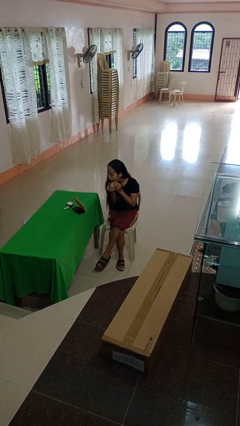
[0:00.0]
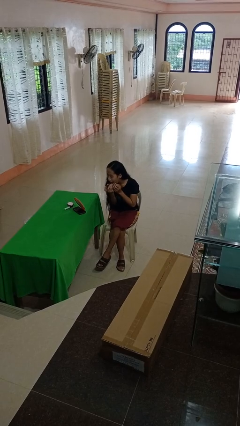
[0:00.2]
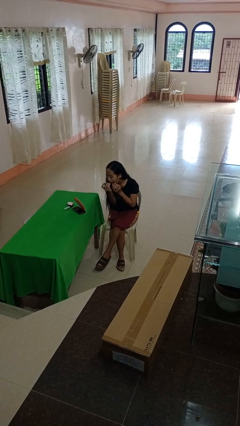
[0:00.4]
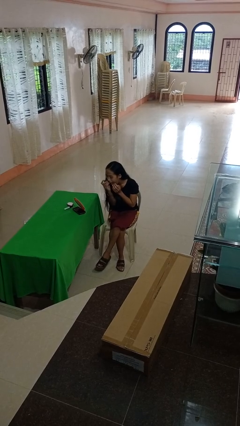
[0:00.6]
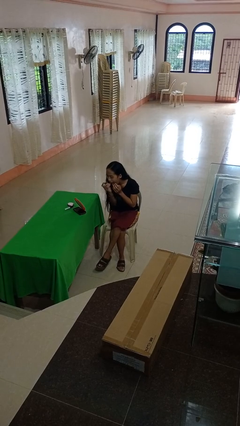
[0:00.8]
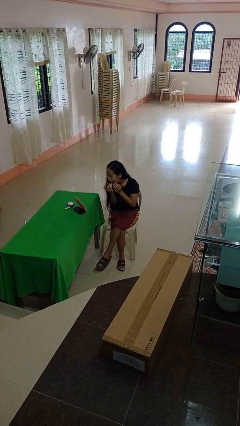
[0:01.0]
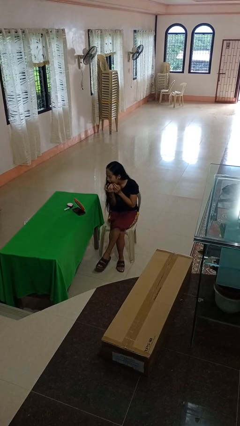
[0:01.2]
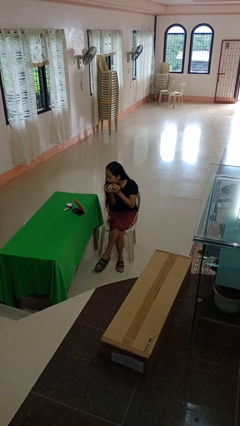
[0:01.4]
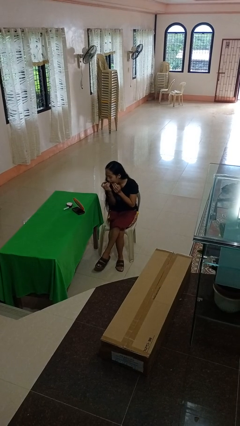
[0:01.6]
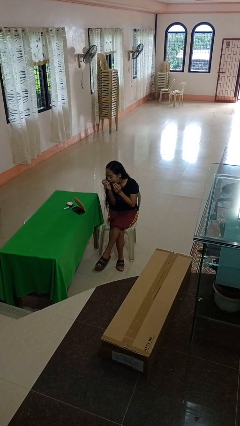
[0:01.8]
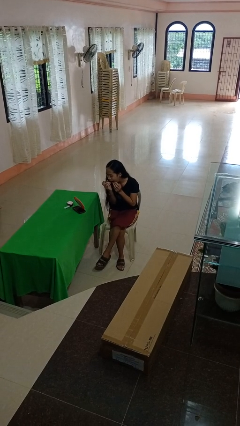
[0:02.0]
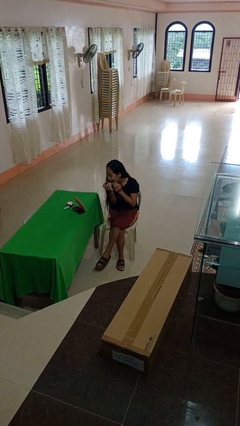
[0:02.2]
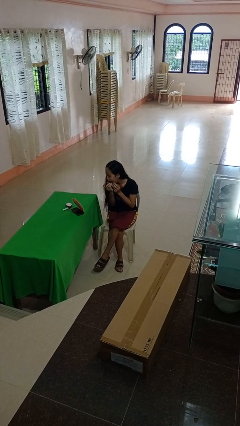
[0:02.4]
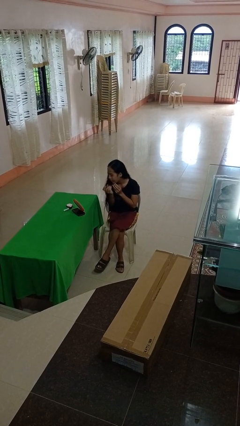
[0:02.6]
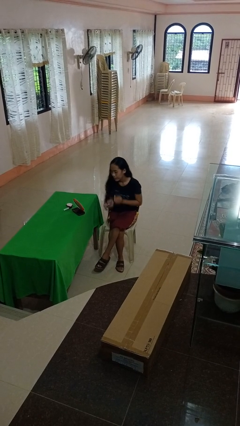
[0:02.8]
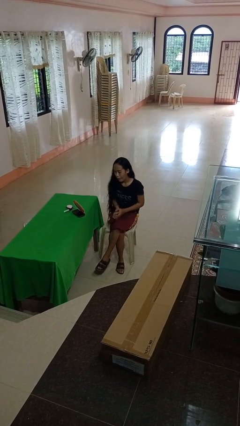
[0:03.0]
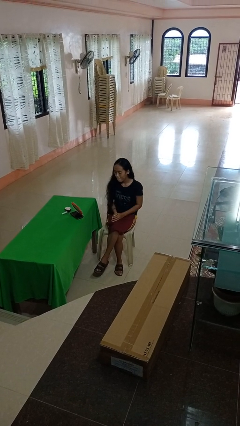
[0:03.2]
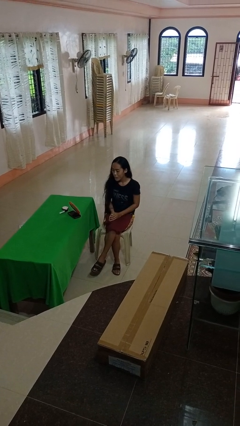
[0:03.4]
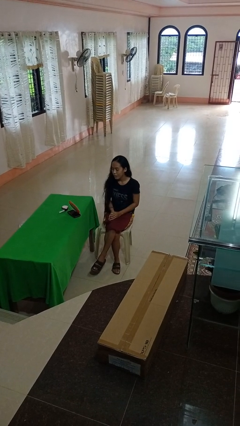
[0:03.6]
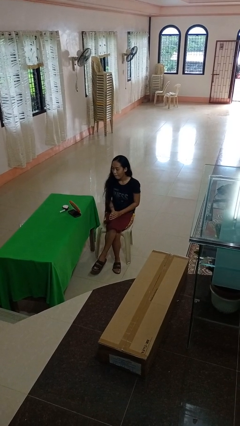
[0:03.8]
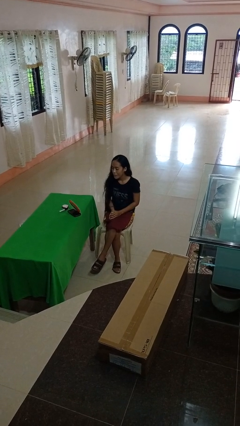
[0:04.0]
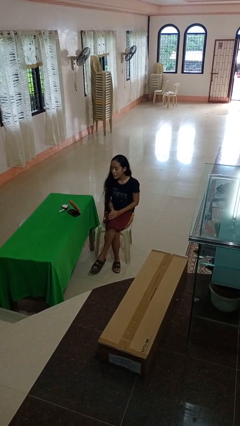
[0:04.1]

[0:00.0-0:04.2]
person applies lip makeup

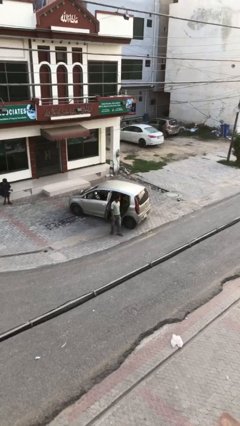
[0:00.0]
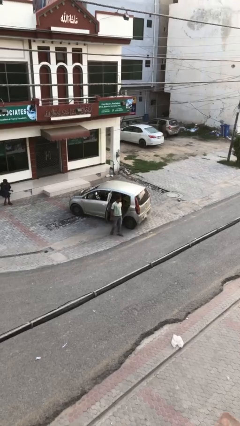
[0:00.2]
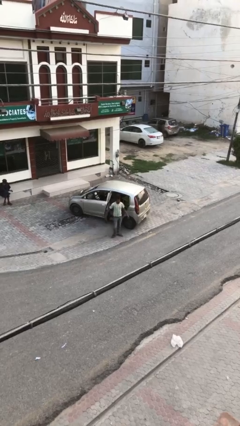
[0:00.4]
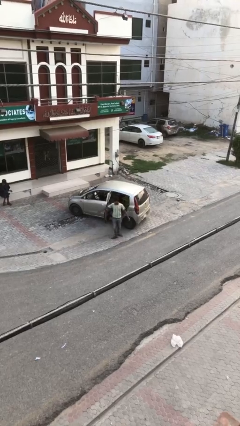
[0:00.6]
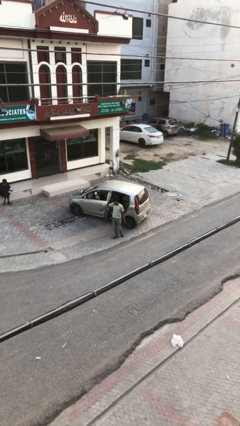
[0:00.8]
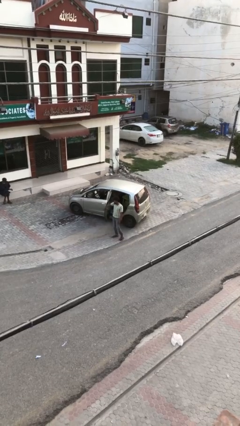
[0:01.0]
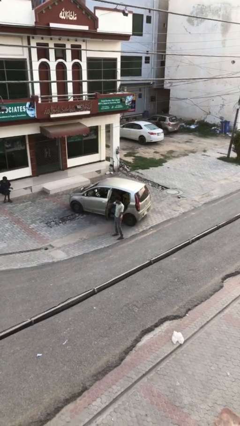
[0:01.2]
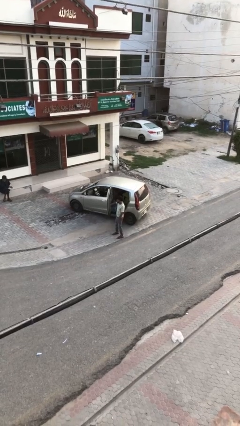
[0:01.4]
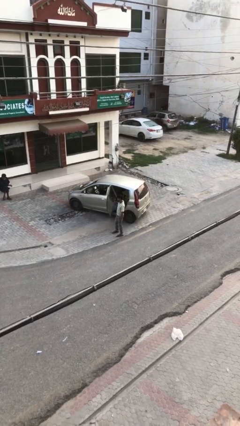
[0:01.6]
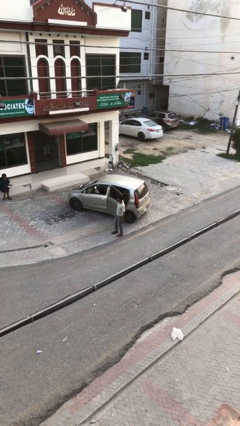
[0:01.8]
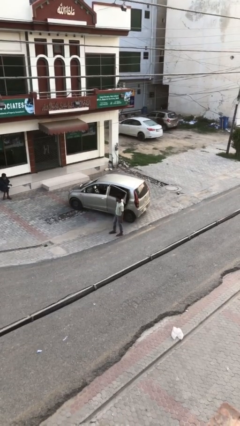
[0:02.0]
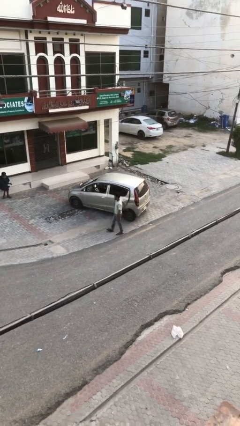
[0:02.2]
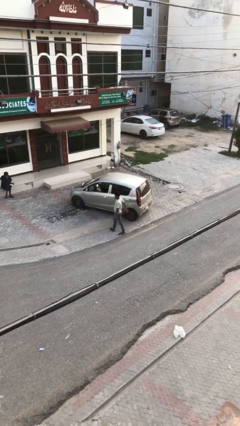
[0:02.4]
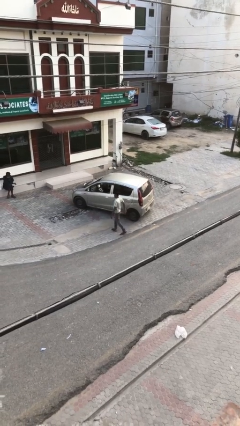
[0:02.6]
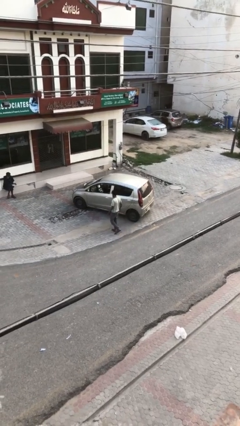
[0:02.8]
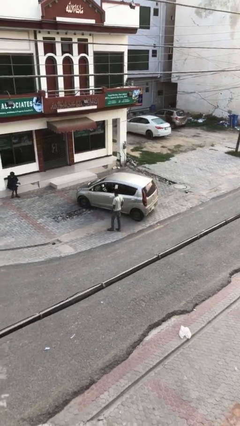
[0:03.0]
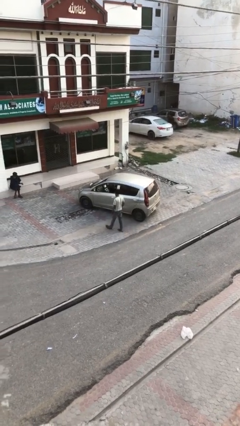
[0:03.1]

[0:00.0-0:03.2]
person closes car door

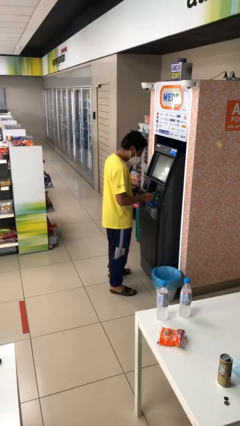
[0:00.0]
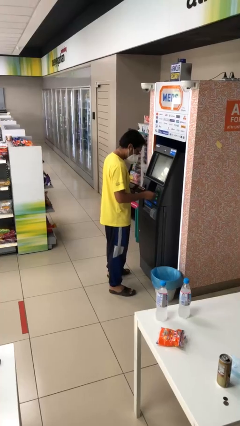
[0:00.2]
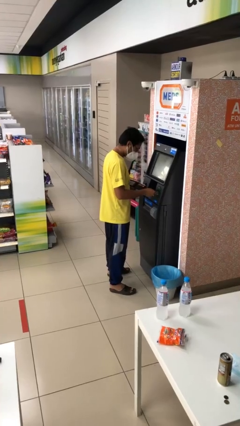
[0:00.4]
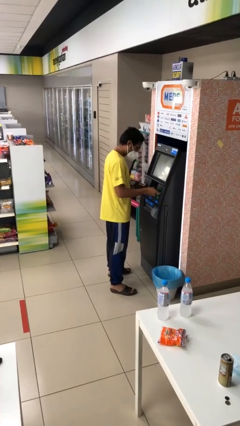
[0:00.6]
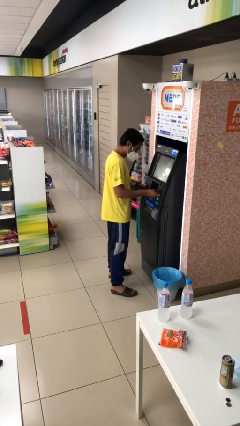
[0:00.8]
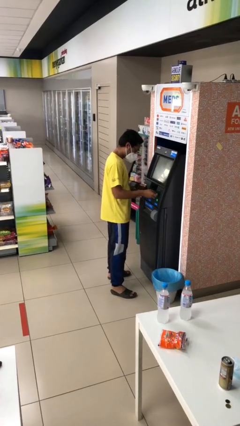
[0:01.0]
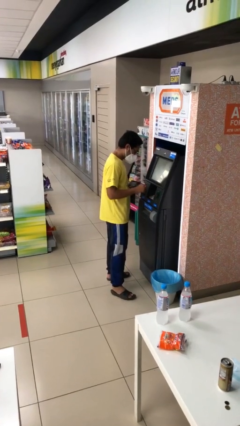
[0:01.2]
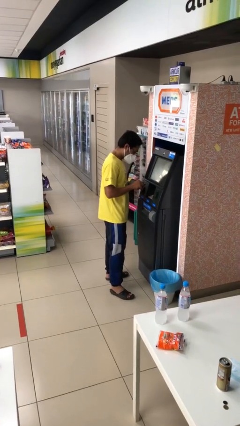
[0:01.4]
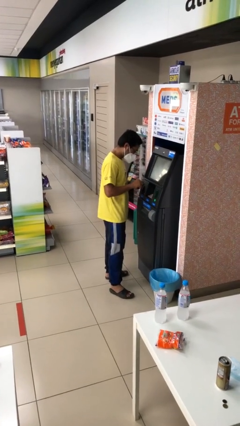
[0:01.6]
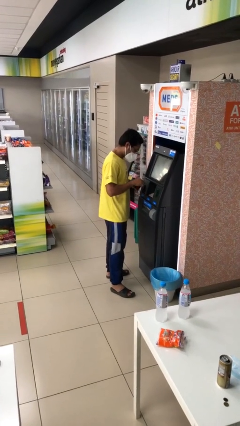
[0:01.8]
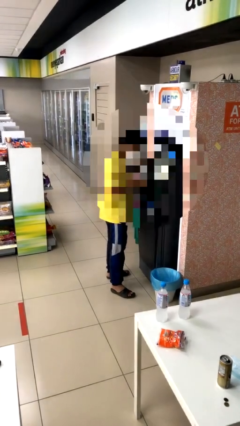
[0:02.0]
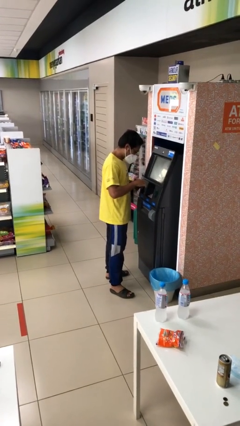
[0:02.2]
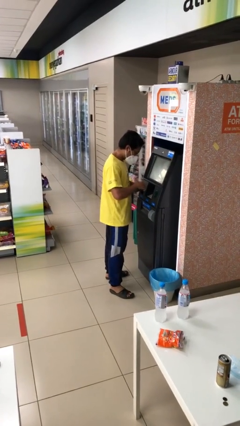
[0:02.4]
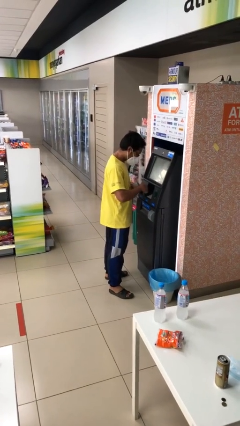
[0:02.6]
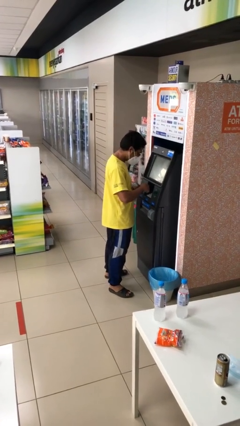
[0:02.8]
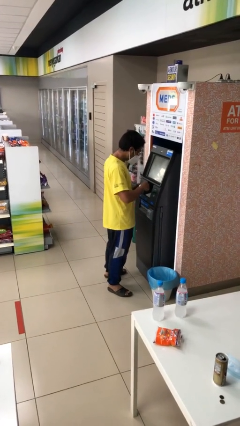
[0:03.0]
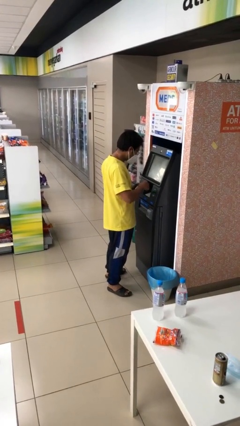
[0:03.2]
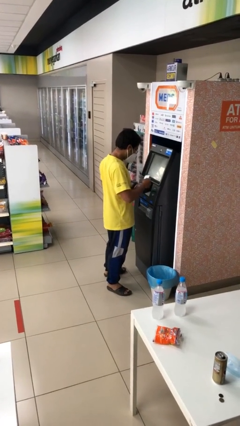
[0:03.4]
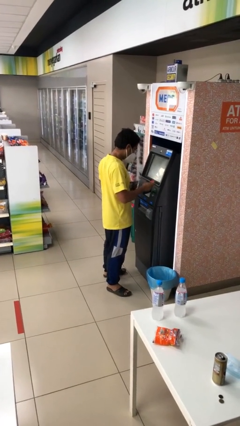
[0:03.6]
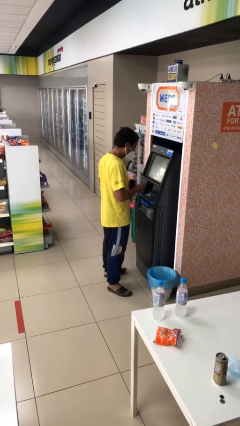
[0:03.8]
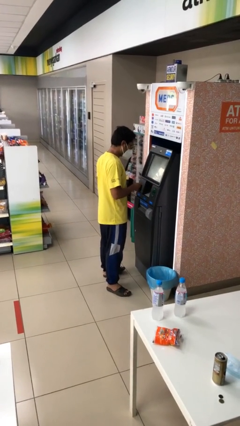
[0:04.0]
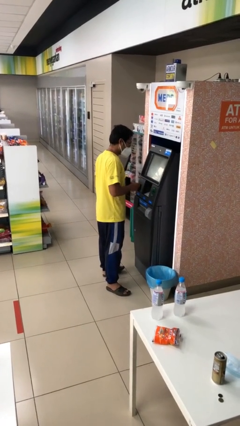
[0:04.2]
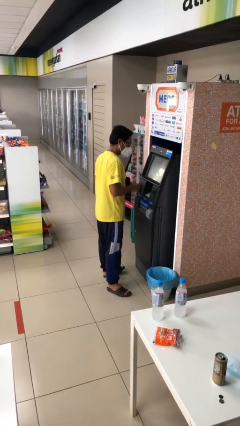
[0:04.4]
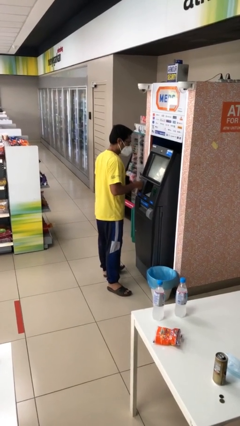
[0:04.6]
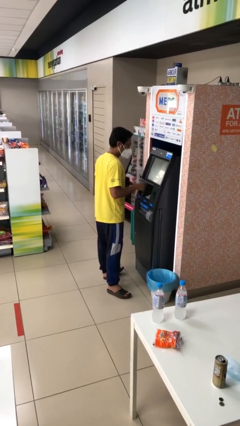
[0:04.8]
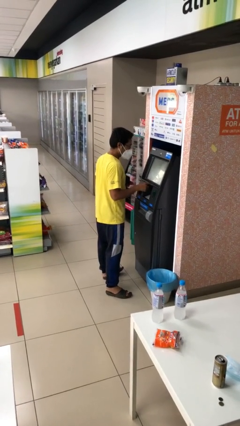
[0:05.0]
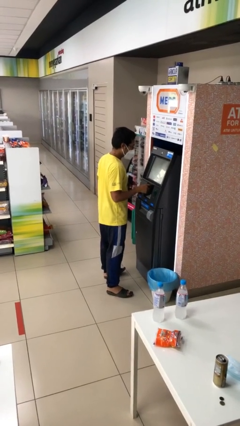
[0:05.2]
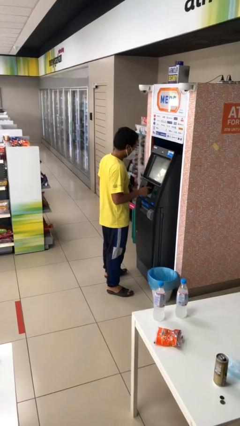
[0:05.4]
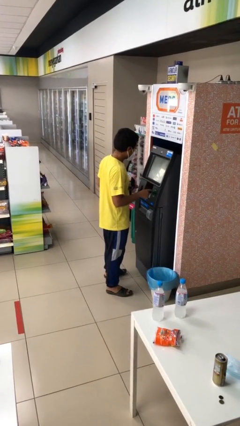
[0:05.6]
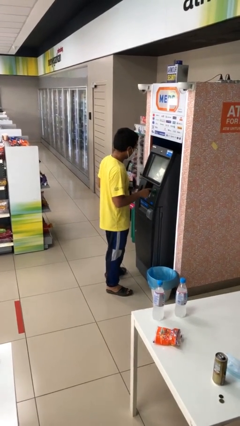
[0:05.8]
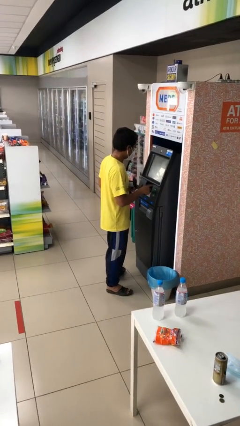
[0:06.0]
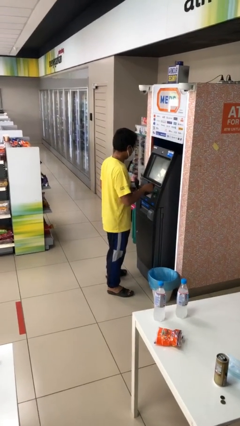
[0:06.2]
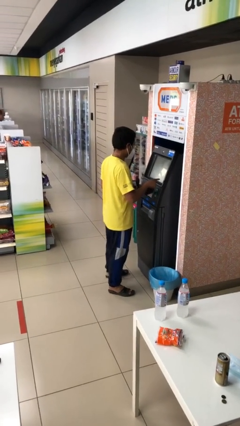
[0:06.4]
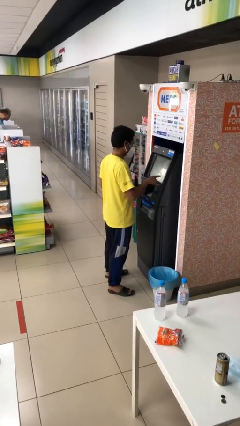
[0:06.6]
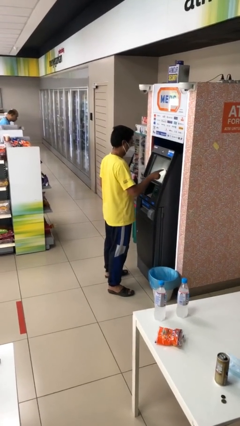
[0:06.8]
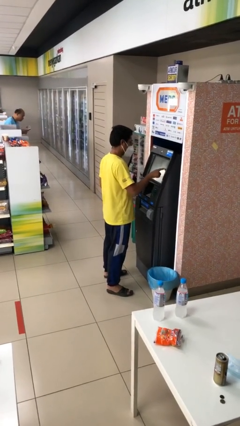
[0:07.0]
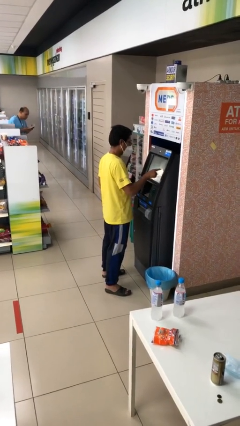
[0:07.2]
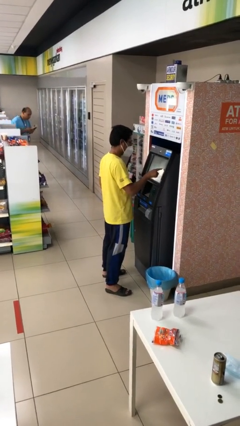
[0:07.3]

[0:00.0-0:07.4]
person purchases from machine

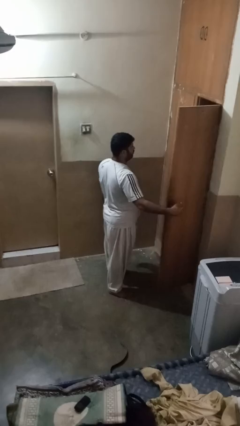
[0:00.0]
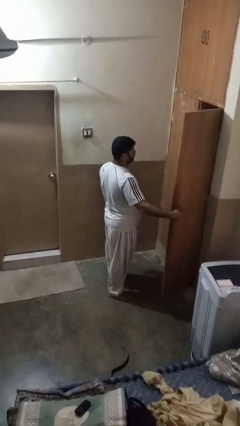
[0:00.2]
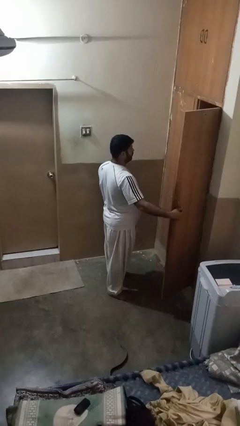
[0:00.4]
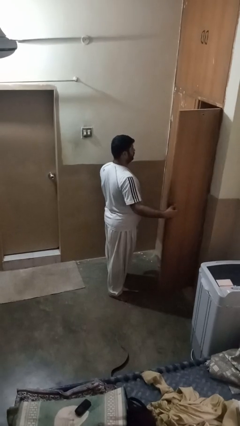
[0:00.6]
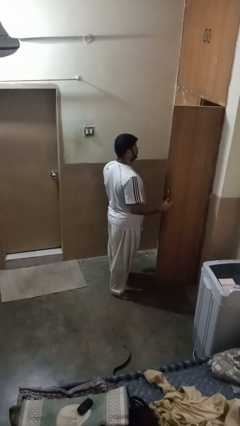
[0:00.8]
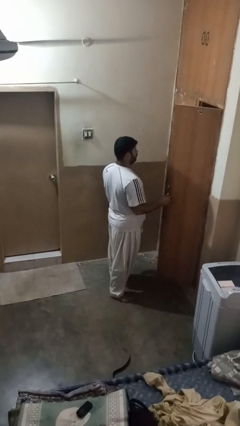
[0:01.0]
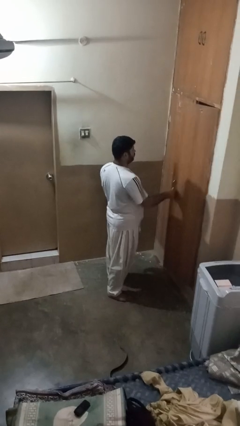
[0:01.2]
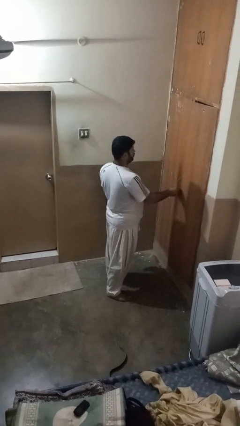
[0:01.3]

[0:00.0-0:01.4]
person closes closet door

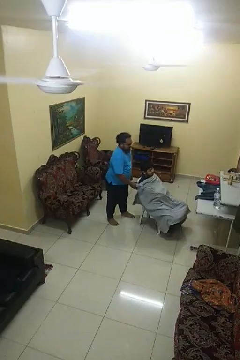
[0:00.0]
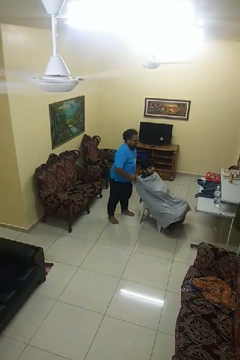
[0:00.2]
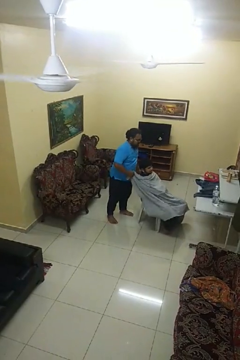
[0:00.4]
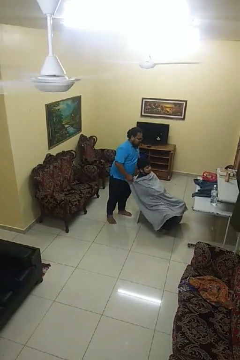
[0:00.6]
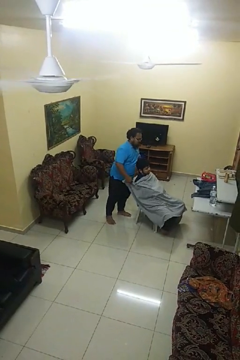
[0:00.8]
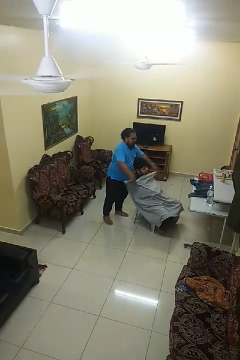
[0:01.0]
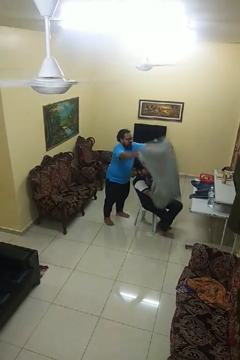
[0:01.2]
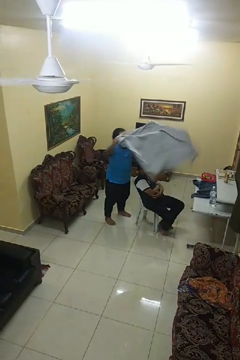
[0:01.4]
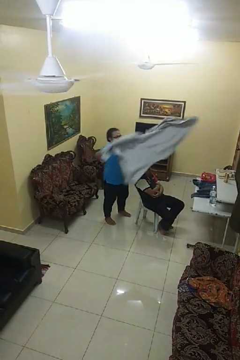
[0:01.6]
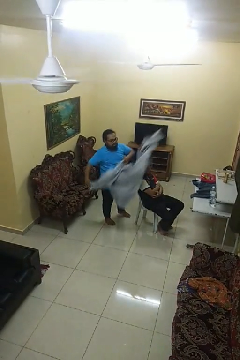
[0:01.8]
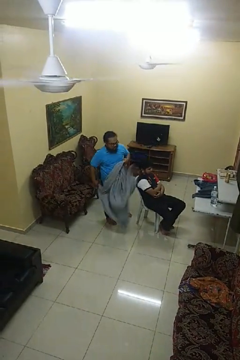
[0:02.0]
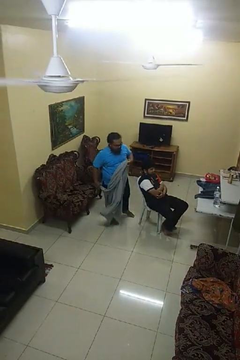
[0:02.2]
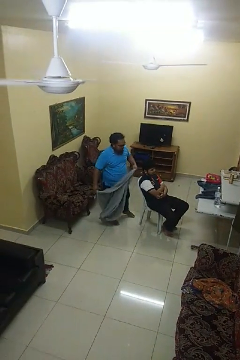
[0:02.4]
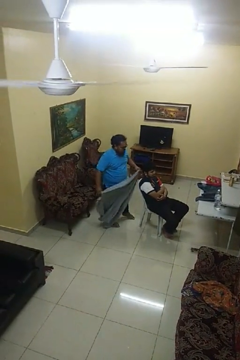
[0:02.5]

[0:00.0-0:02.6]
person uncovers friend with blanket
